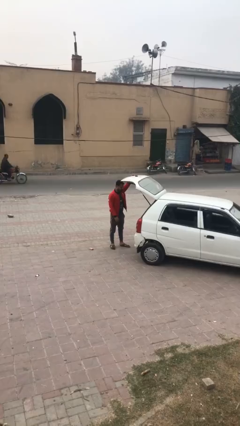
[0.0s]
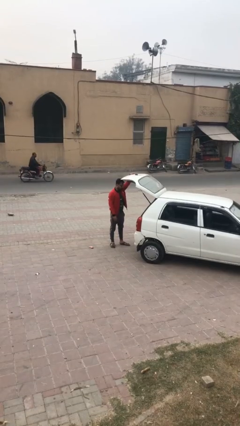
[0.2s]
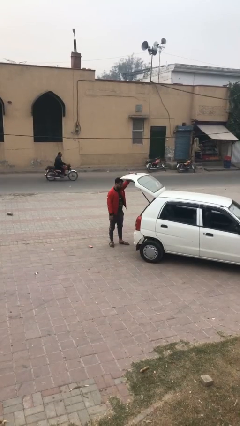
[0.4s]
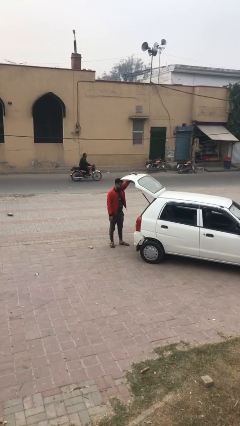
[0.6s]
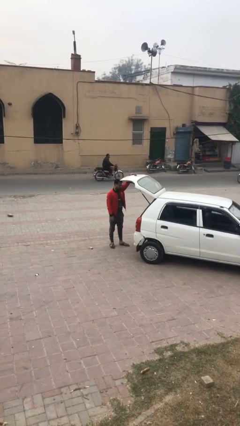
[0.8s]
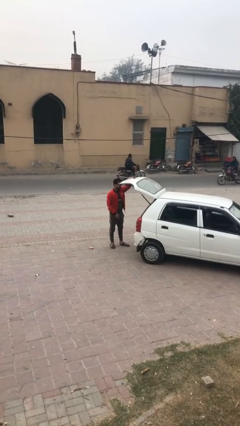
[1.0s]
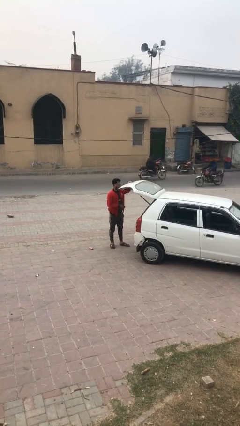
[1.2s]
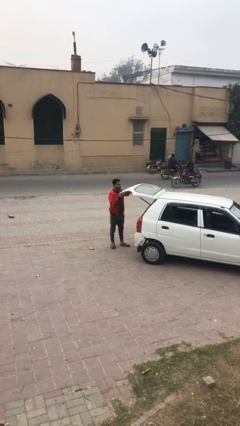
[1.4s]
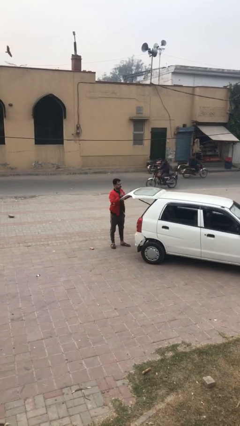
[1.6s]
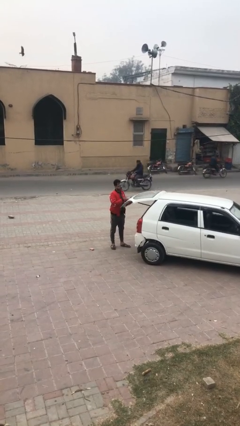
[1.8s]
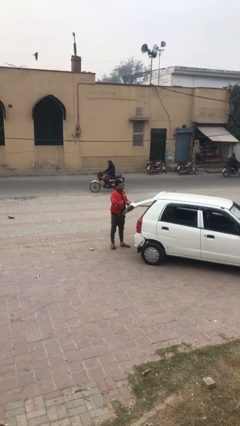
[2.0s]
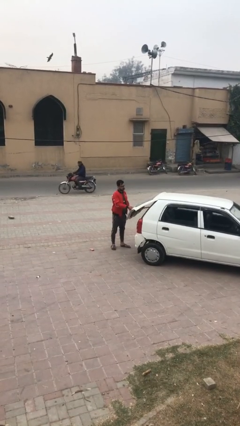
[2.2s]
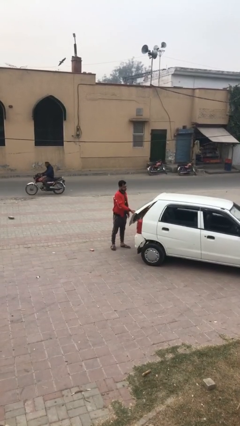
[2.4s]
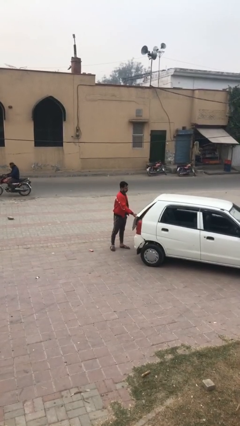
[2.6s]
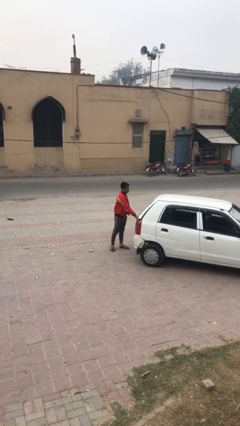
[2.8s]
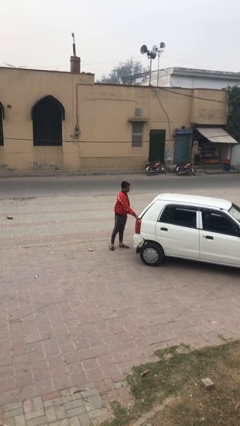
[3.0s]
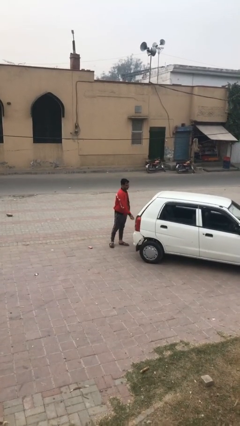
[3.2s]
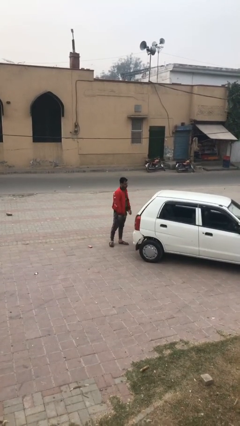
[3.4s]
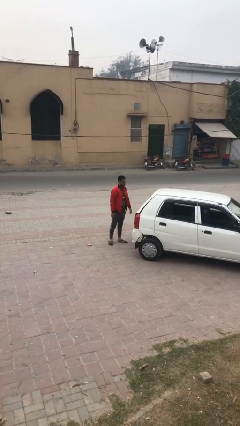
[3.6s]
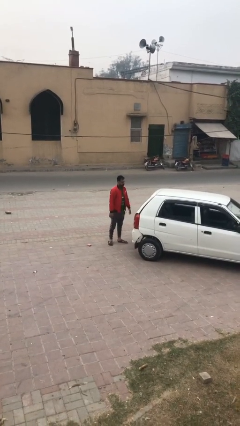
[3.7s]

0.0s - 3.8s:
person closes car trunk

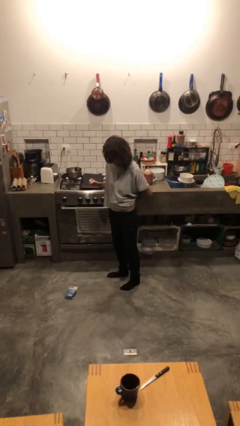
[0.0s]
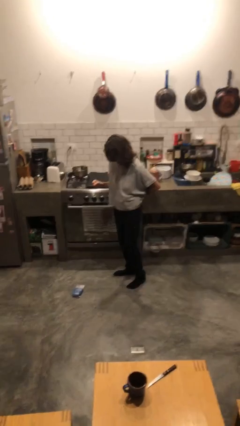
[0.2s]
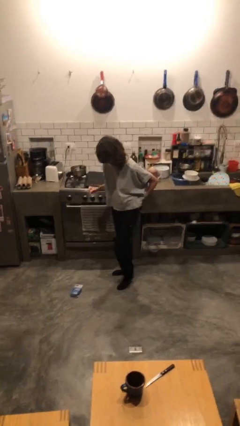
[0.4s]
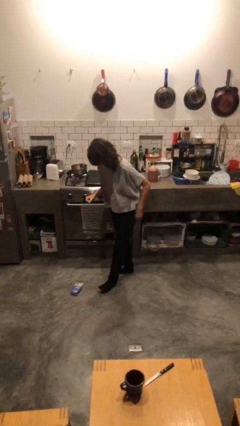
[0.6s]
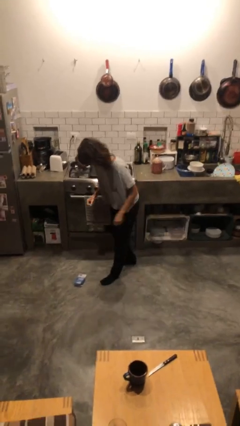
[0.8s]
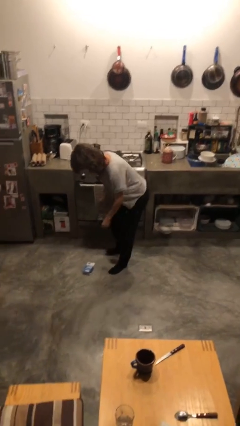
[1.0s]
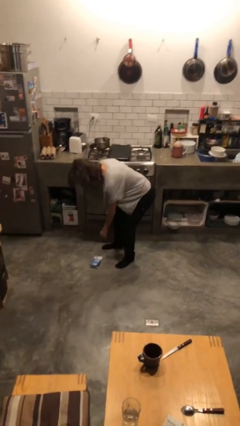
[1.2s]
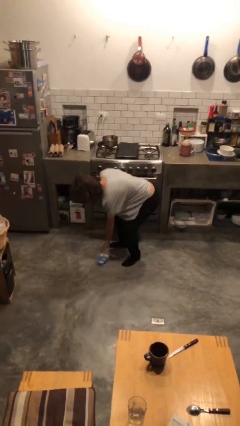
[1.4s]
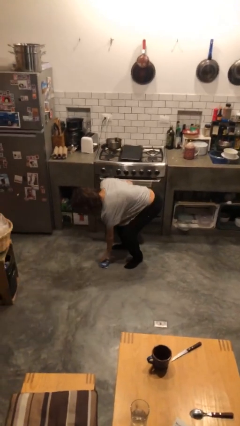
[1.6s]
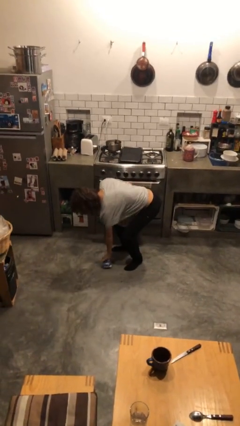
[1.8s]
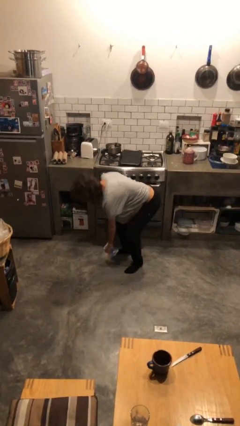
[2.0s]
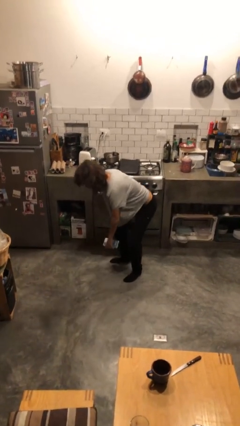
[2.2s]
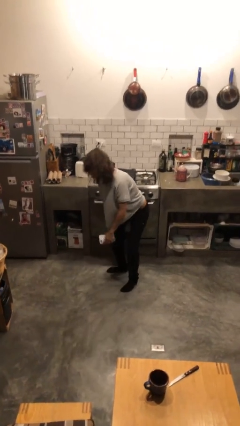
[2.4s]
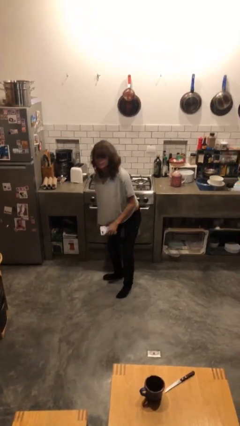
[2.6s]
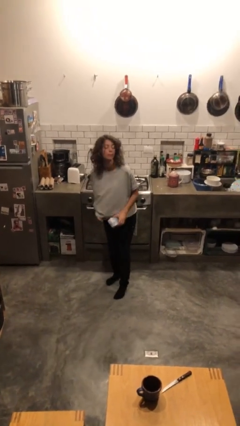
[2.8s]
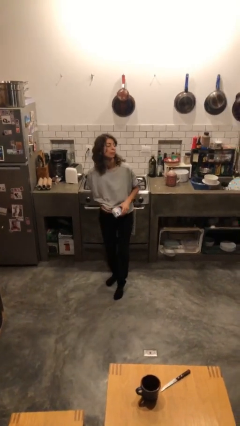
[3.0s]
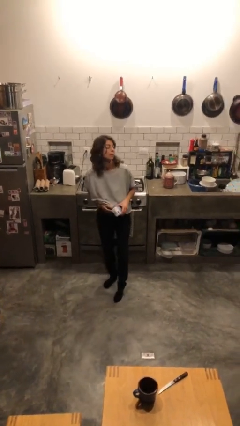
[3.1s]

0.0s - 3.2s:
person picks up object from floor

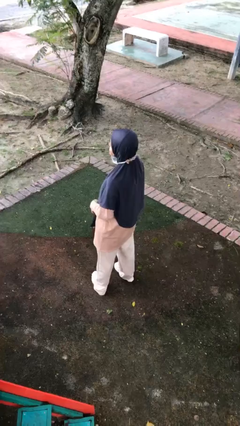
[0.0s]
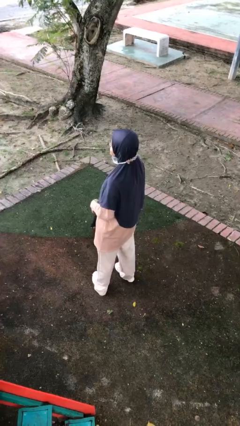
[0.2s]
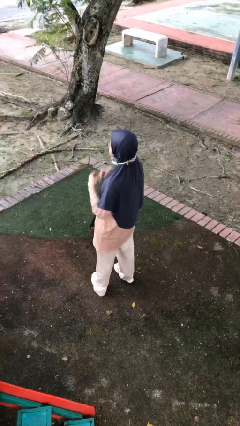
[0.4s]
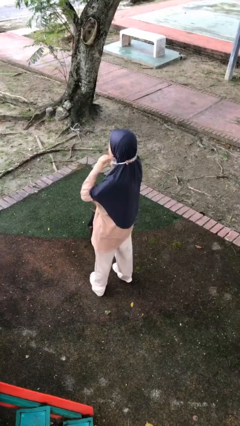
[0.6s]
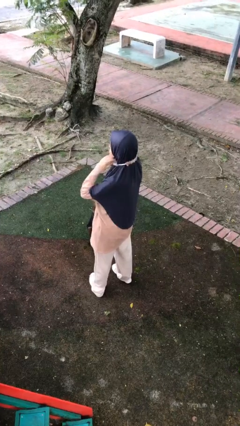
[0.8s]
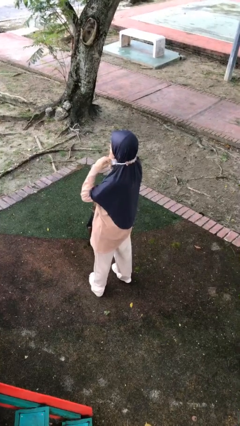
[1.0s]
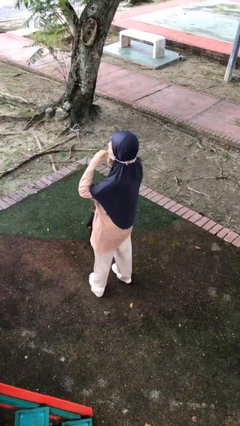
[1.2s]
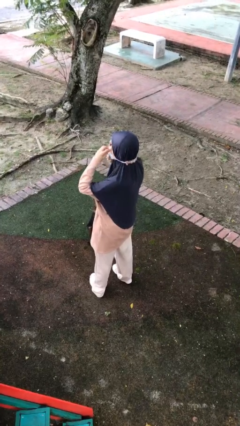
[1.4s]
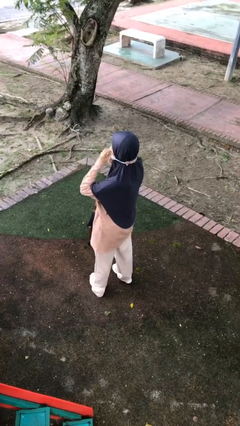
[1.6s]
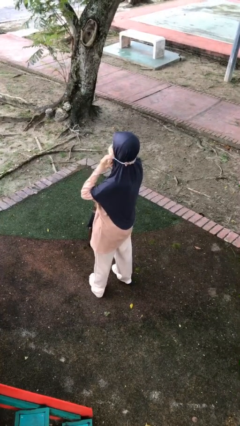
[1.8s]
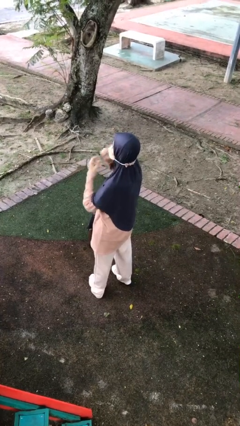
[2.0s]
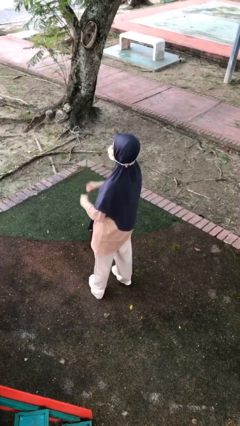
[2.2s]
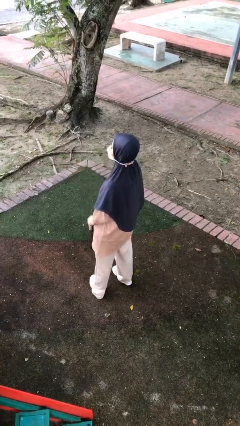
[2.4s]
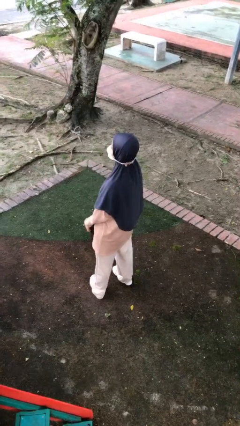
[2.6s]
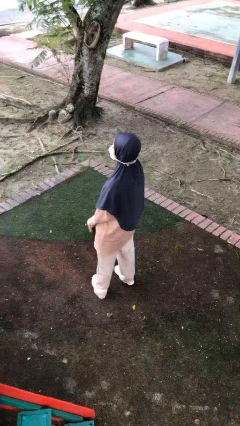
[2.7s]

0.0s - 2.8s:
person puts on facemask

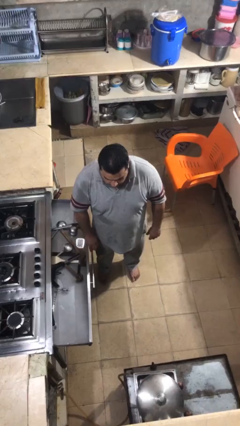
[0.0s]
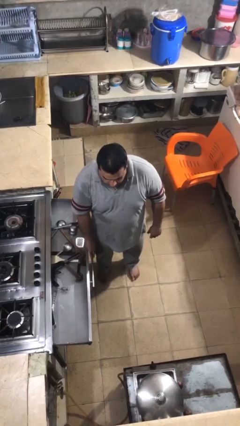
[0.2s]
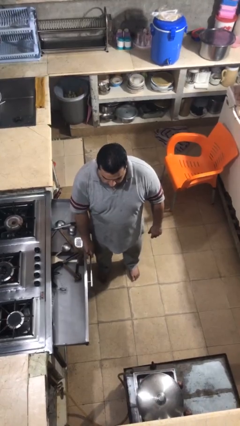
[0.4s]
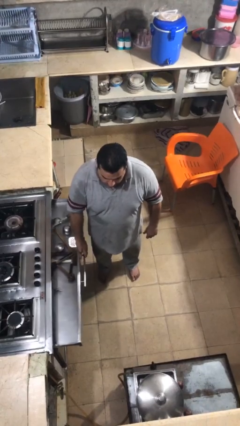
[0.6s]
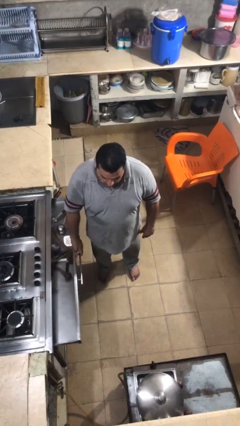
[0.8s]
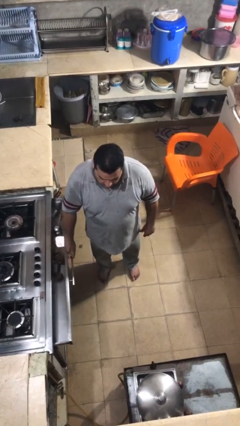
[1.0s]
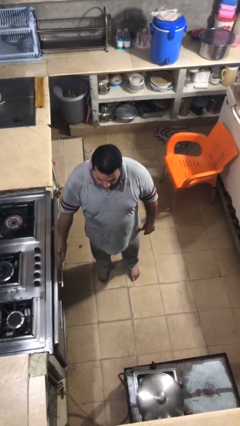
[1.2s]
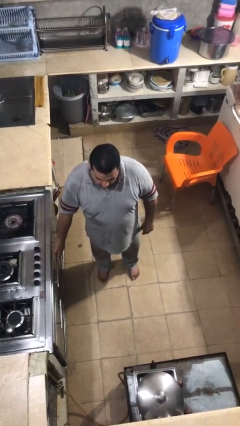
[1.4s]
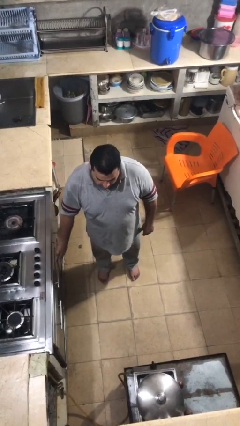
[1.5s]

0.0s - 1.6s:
person closes kitchen drawer

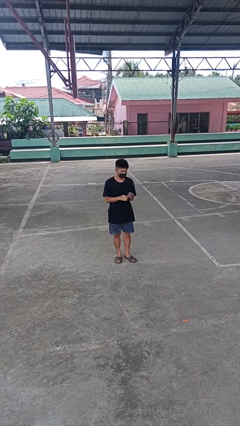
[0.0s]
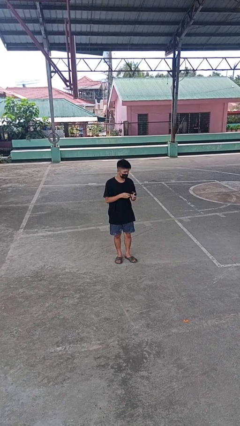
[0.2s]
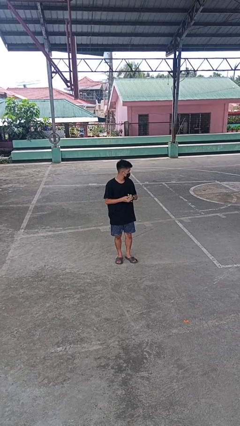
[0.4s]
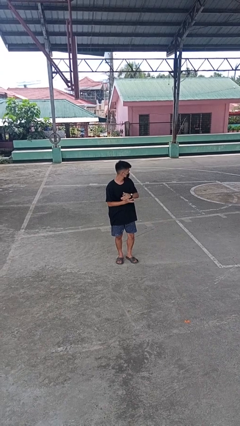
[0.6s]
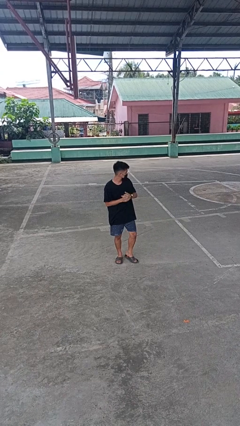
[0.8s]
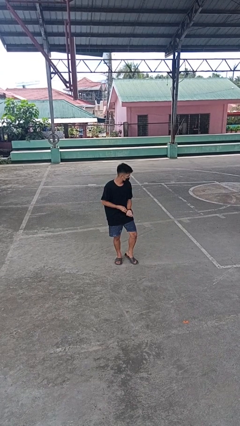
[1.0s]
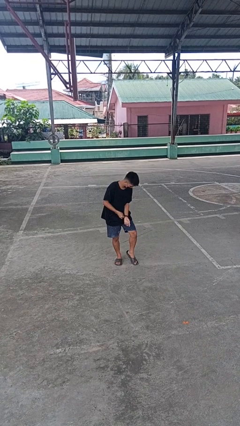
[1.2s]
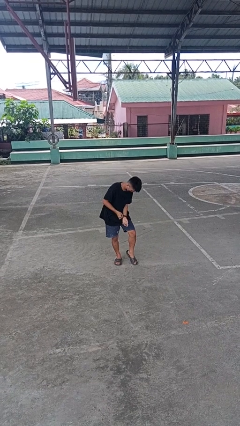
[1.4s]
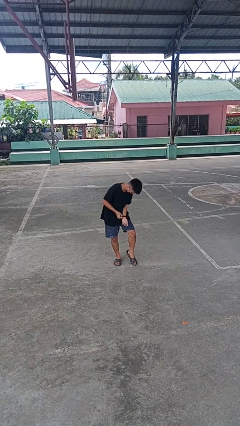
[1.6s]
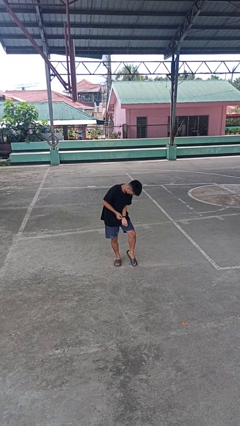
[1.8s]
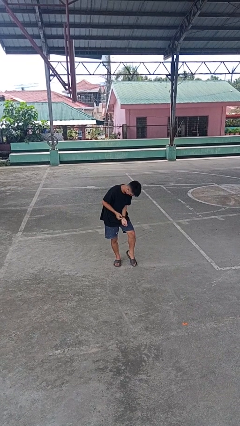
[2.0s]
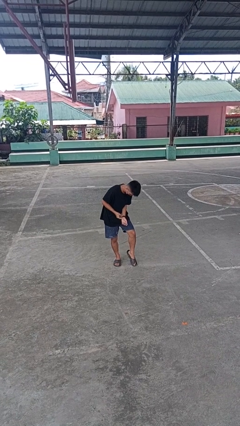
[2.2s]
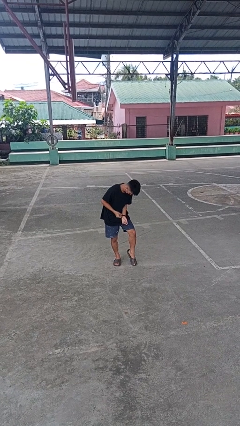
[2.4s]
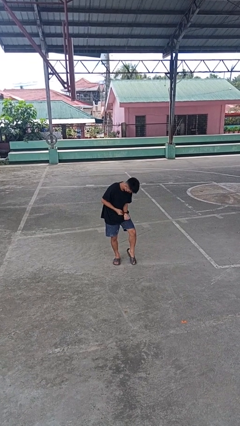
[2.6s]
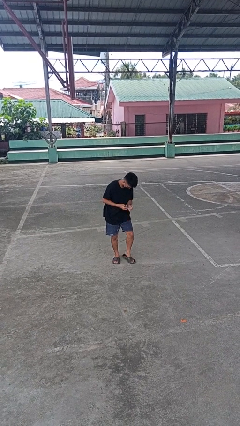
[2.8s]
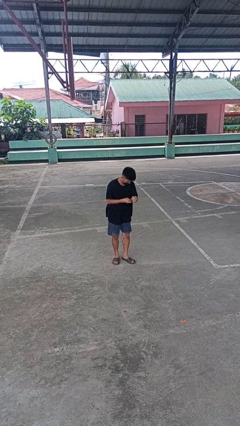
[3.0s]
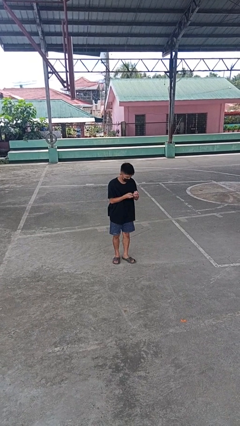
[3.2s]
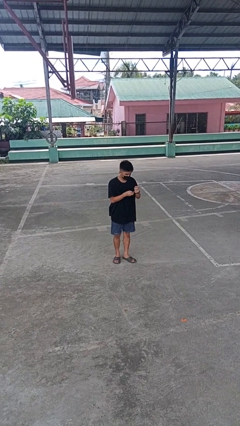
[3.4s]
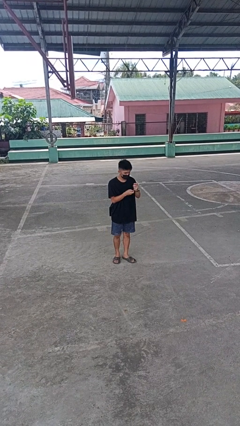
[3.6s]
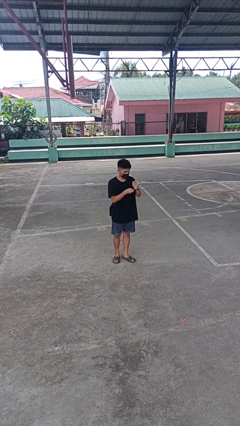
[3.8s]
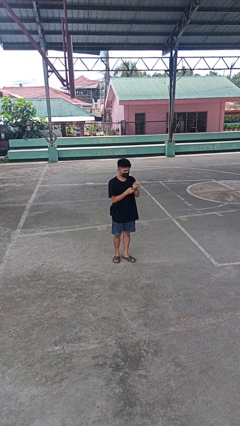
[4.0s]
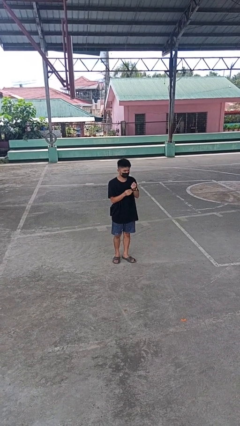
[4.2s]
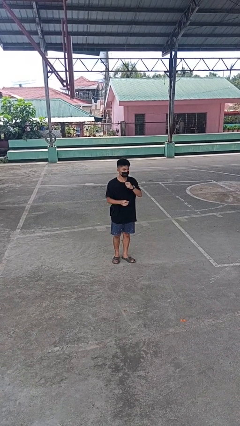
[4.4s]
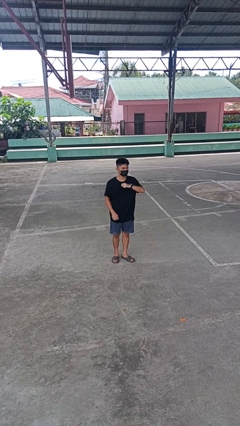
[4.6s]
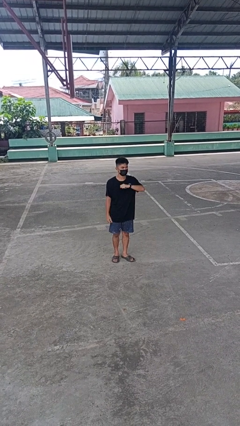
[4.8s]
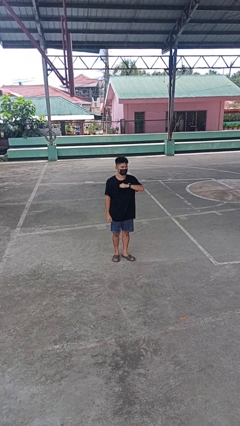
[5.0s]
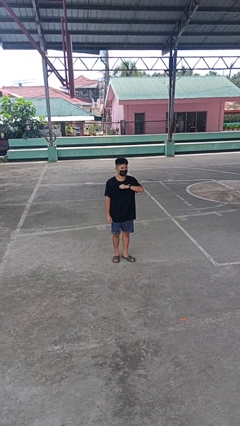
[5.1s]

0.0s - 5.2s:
person puts on wristwatch

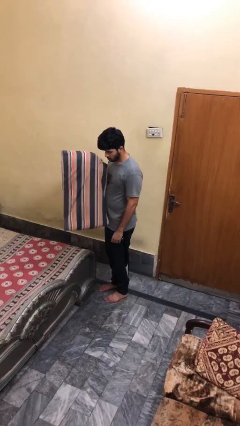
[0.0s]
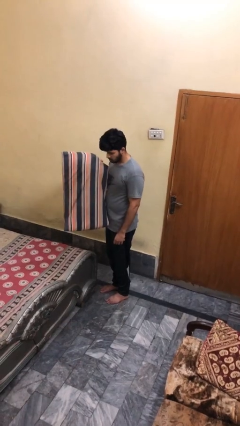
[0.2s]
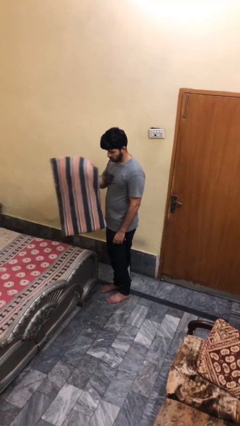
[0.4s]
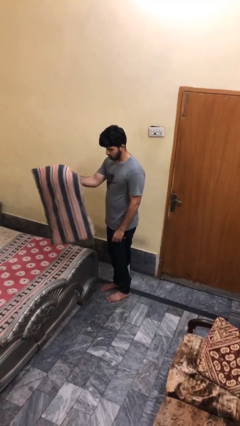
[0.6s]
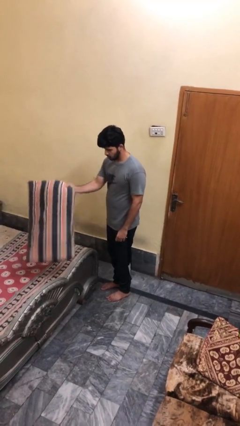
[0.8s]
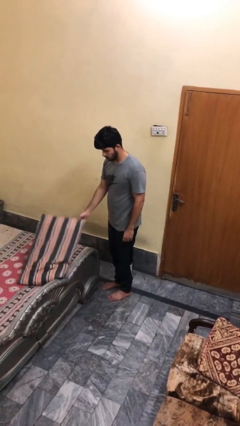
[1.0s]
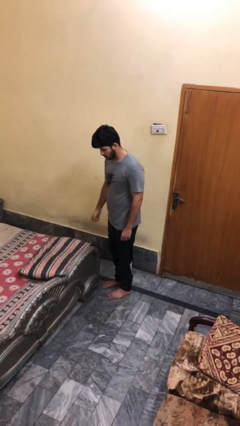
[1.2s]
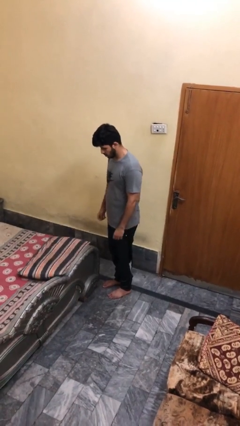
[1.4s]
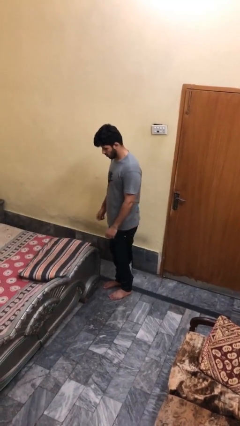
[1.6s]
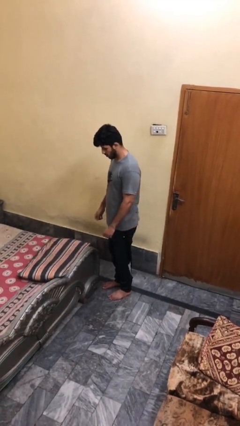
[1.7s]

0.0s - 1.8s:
person puts down object on bed
